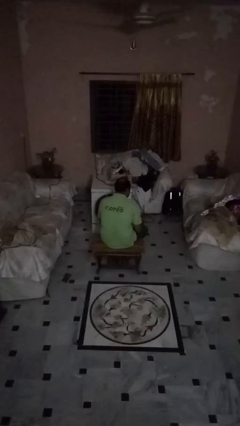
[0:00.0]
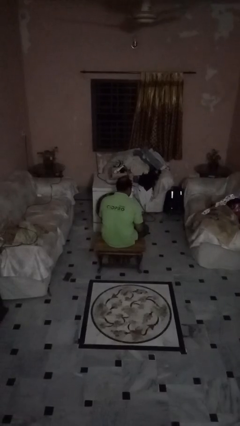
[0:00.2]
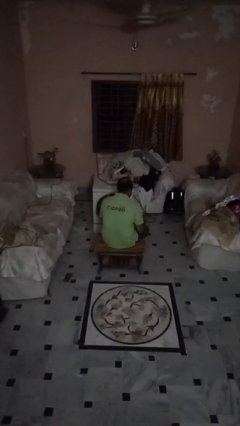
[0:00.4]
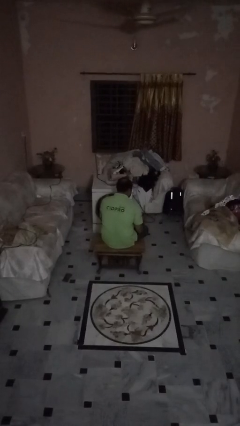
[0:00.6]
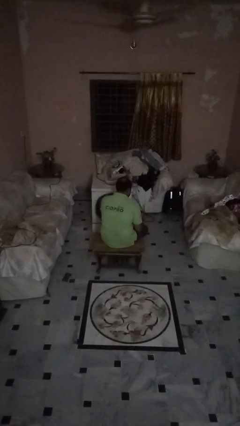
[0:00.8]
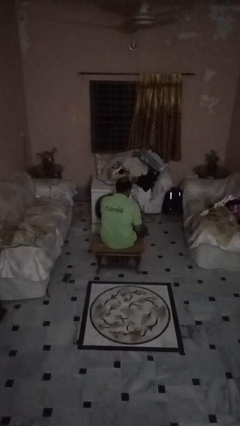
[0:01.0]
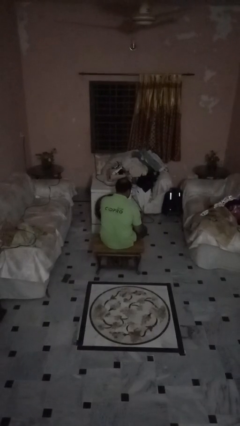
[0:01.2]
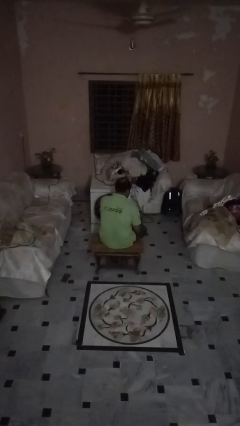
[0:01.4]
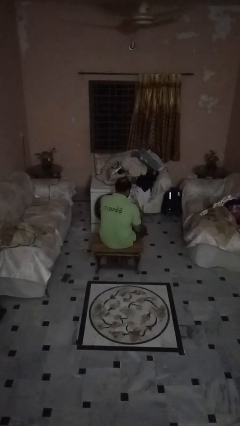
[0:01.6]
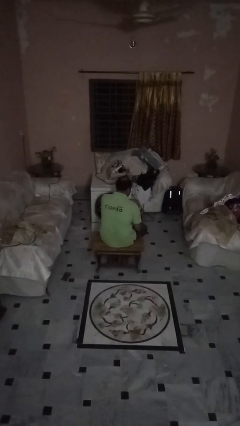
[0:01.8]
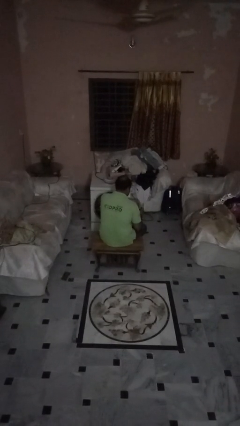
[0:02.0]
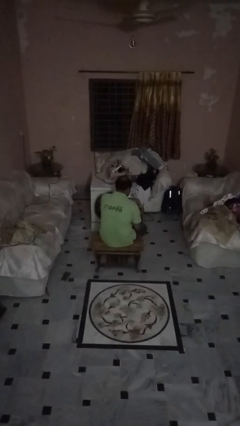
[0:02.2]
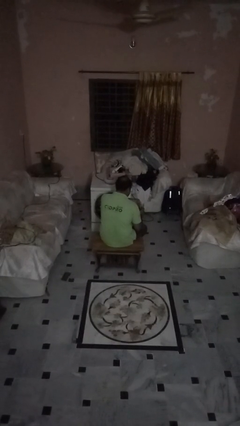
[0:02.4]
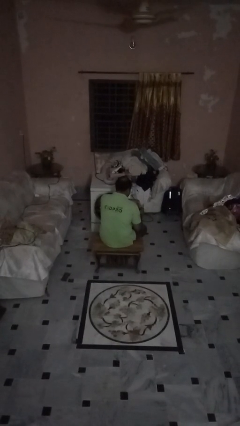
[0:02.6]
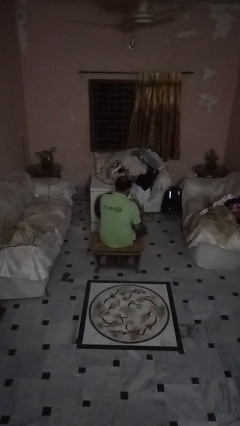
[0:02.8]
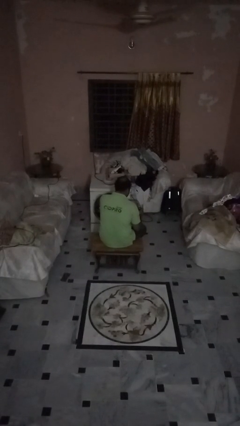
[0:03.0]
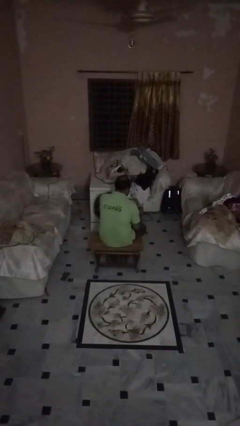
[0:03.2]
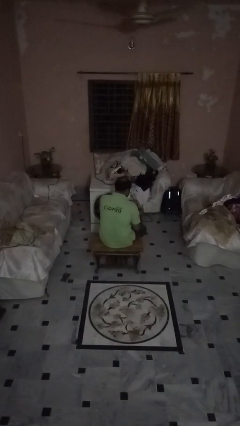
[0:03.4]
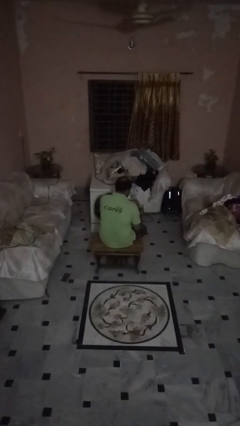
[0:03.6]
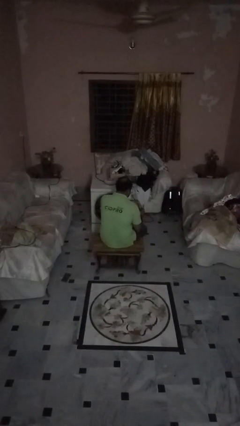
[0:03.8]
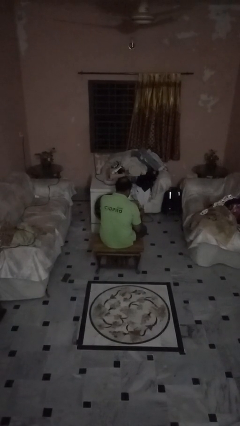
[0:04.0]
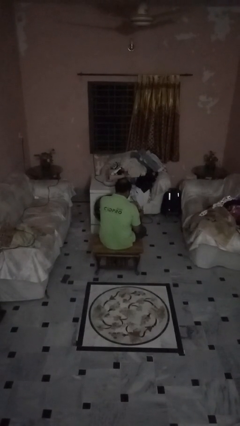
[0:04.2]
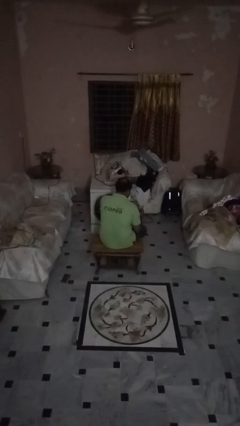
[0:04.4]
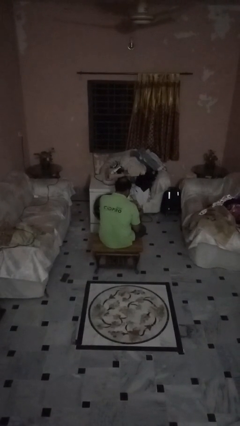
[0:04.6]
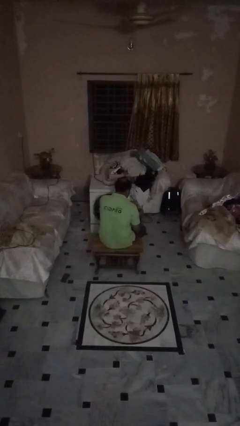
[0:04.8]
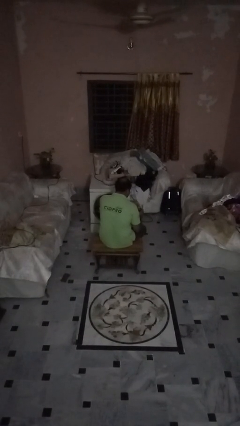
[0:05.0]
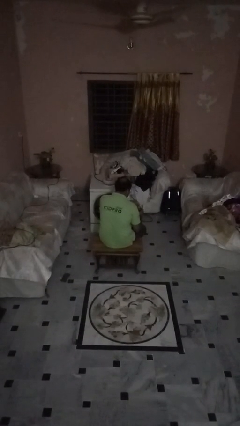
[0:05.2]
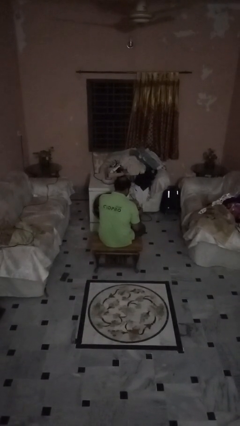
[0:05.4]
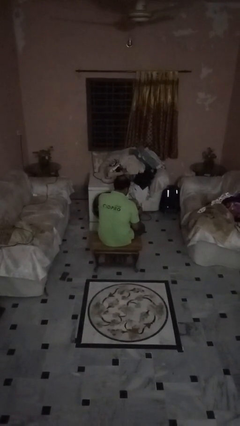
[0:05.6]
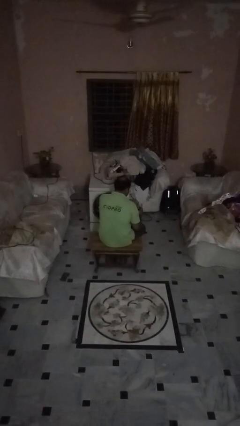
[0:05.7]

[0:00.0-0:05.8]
person opens beverage can

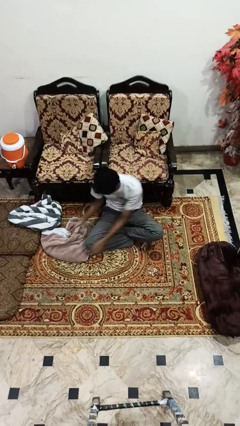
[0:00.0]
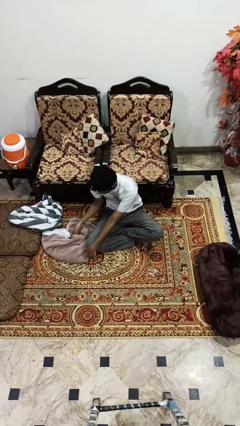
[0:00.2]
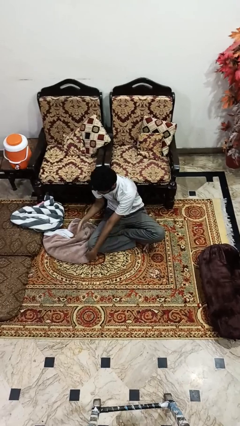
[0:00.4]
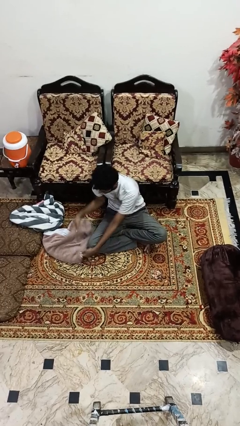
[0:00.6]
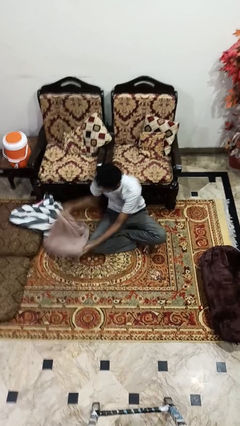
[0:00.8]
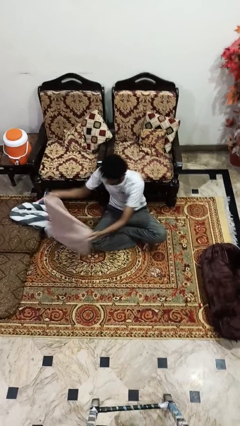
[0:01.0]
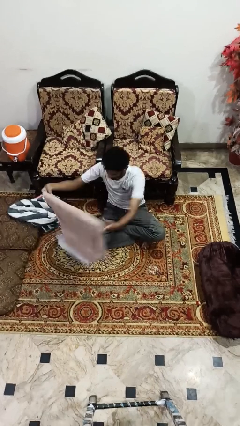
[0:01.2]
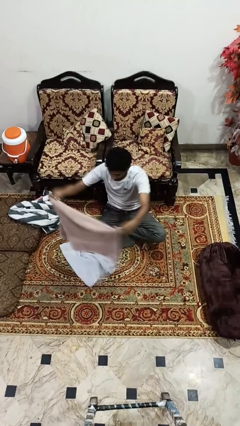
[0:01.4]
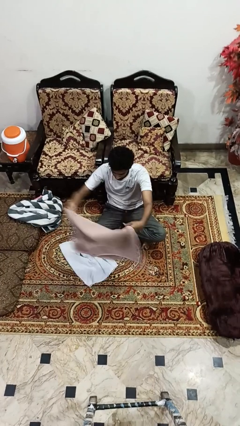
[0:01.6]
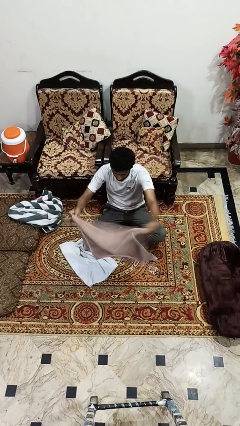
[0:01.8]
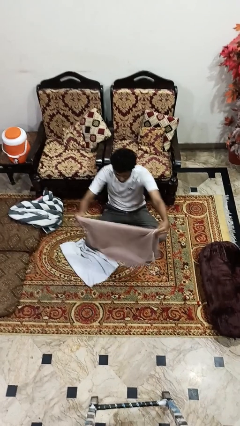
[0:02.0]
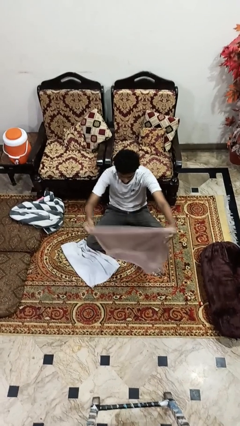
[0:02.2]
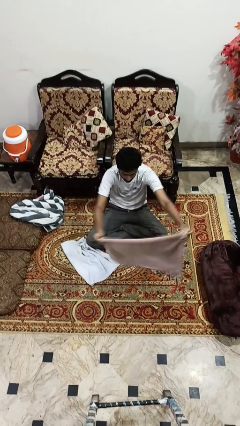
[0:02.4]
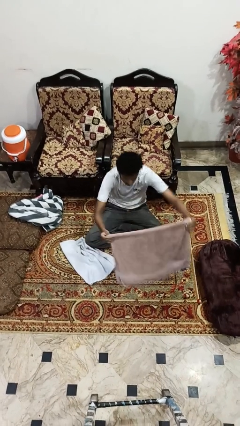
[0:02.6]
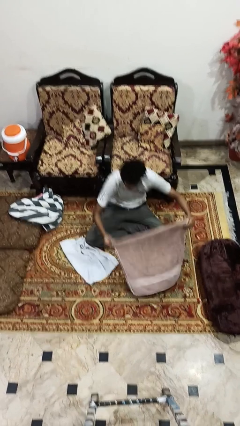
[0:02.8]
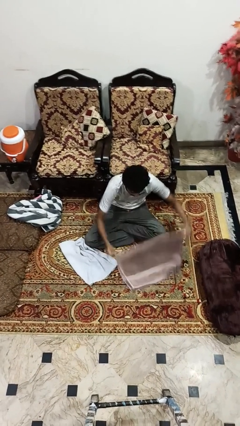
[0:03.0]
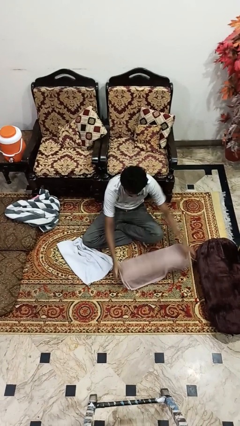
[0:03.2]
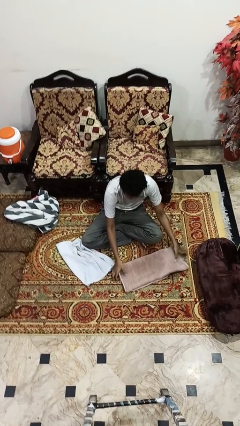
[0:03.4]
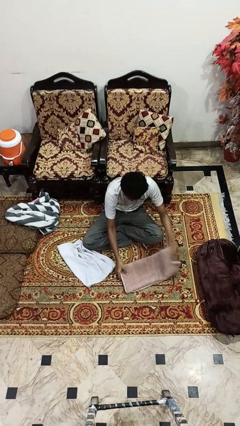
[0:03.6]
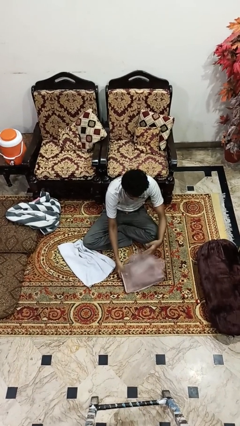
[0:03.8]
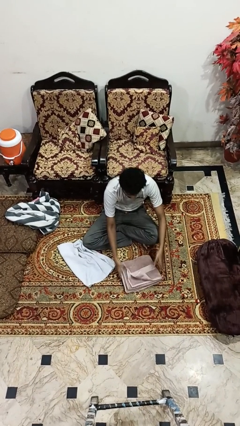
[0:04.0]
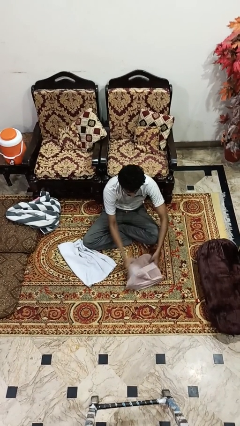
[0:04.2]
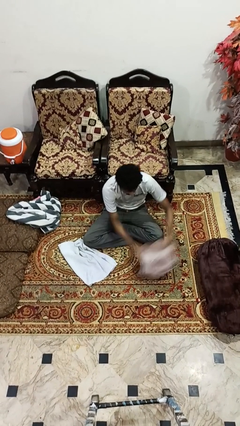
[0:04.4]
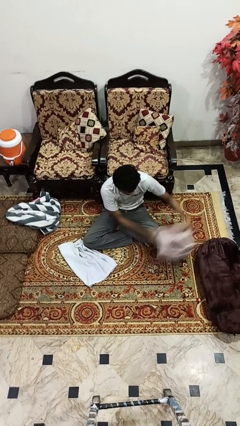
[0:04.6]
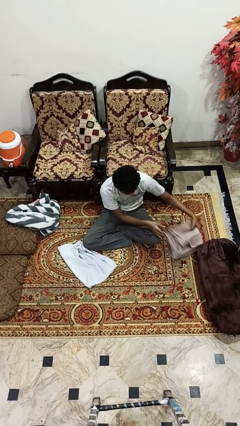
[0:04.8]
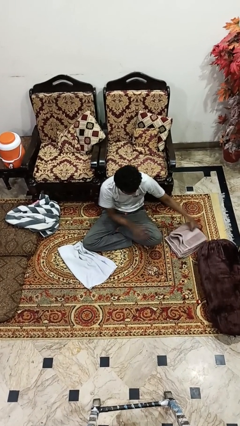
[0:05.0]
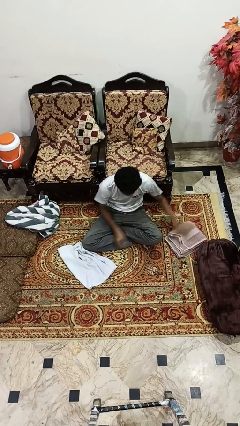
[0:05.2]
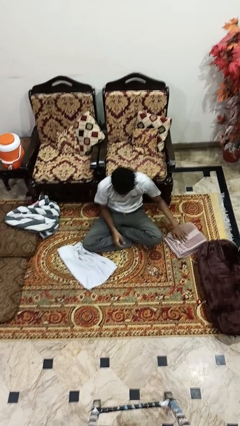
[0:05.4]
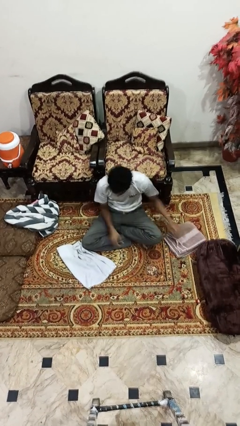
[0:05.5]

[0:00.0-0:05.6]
person folds towel

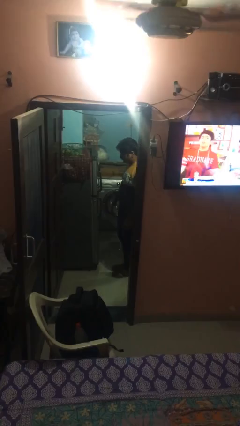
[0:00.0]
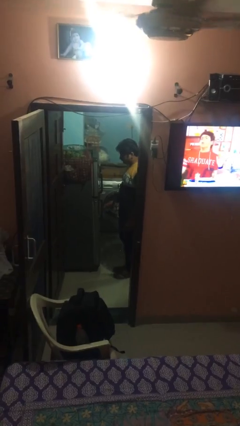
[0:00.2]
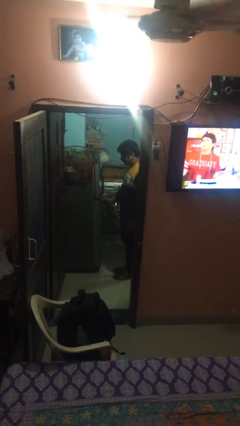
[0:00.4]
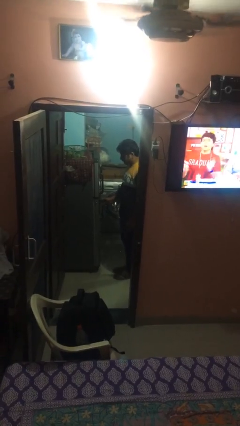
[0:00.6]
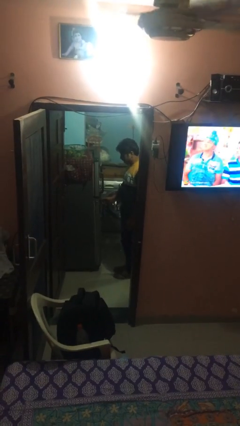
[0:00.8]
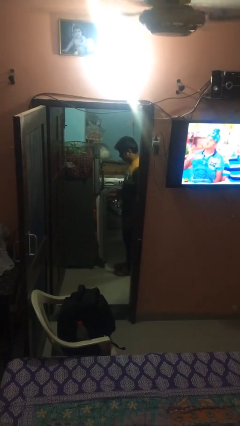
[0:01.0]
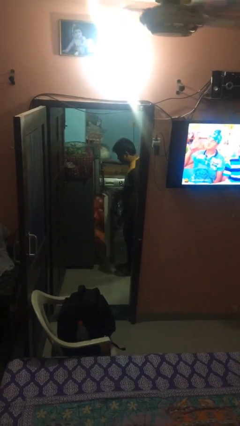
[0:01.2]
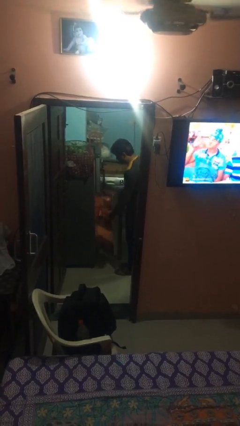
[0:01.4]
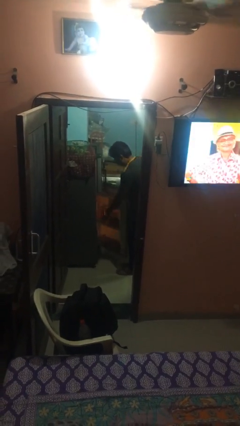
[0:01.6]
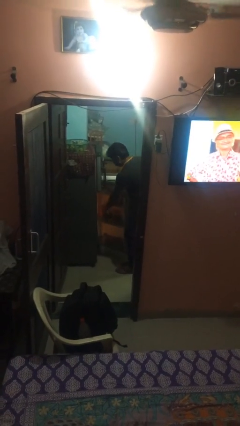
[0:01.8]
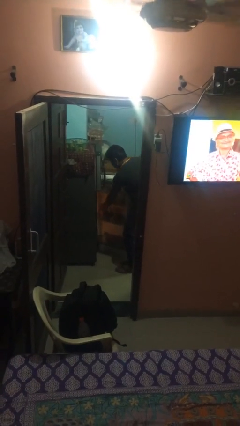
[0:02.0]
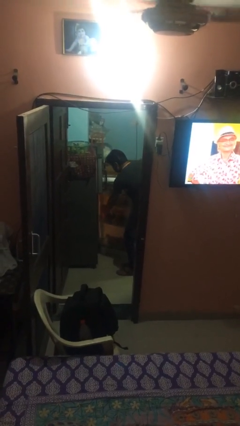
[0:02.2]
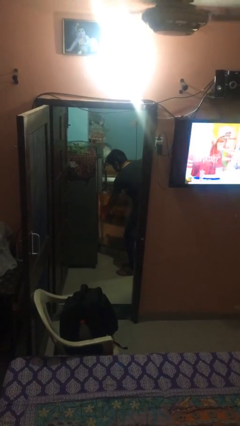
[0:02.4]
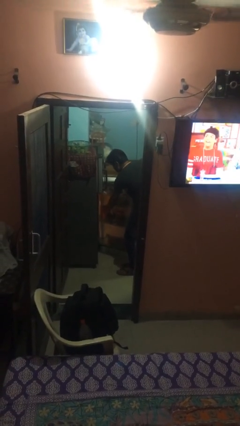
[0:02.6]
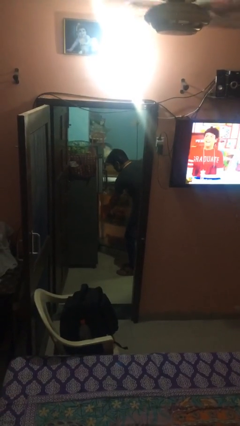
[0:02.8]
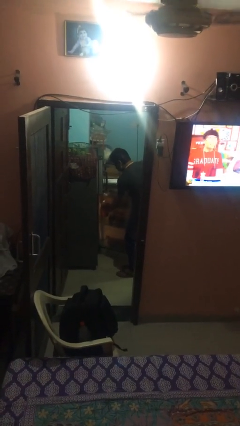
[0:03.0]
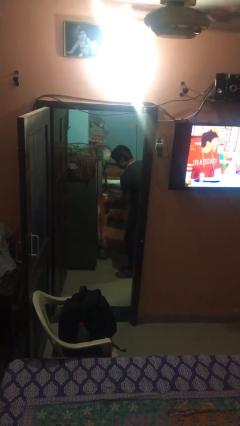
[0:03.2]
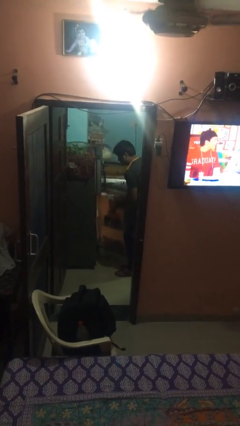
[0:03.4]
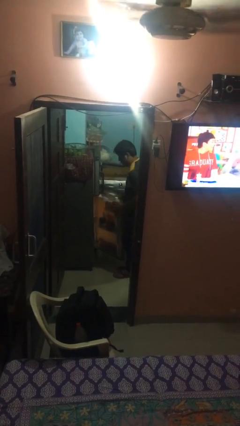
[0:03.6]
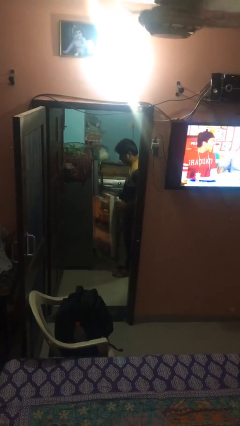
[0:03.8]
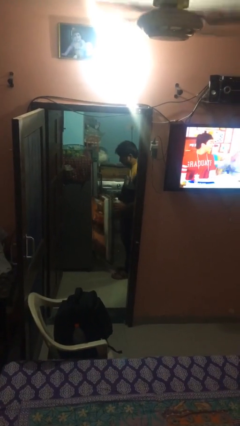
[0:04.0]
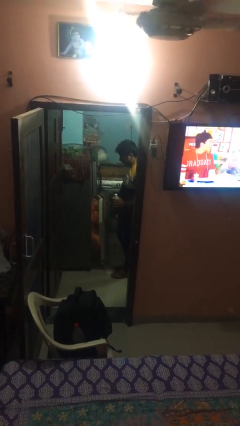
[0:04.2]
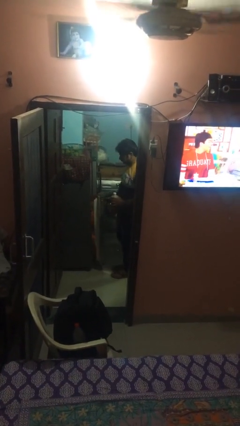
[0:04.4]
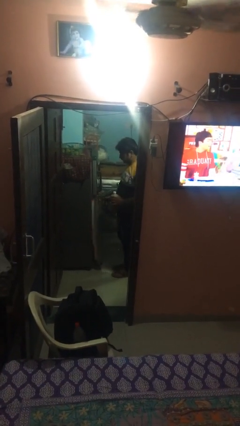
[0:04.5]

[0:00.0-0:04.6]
person takes object from refrigerator

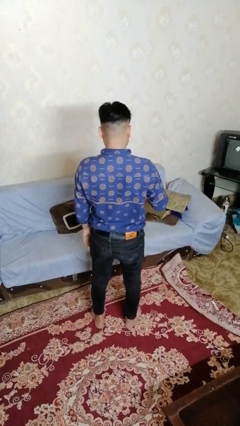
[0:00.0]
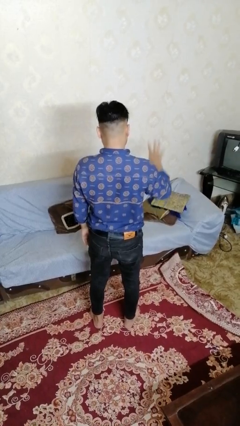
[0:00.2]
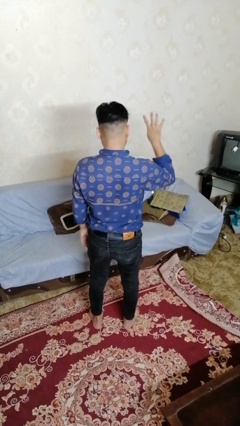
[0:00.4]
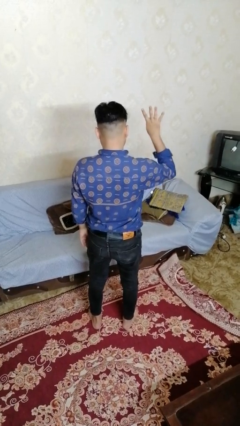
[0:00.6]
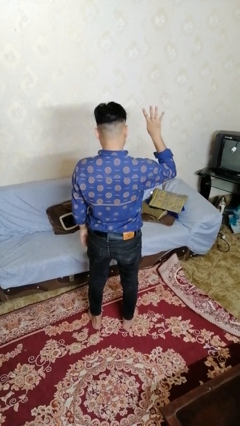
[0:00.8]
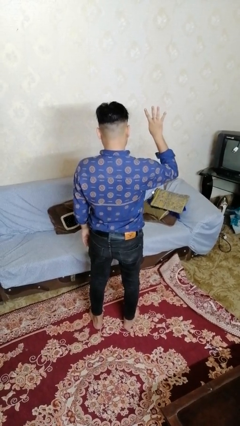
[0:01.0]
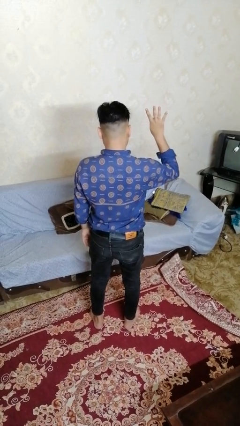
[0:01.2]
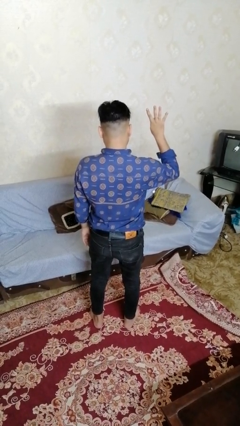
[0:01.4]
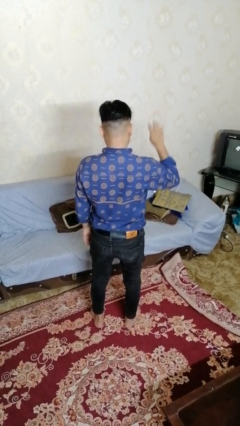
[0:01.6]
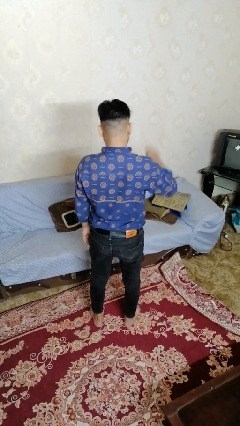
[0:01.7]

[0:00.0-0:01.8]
person gestures number four

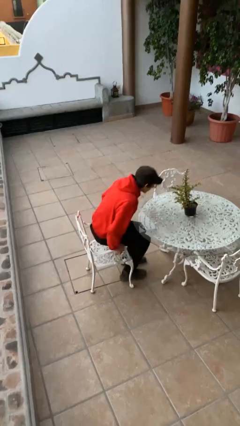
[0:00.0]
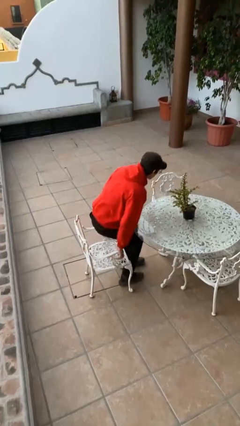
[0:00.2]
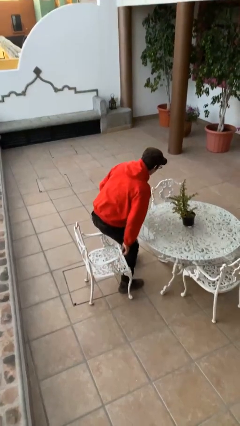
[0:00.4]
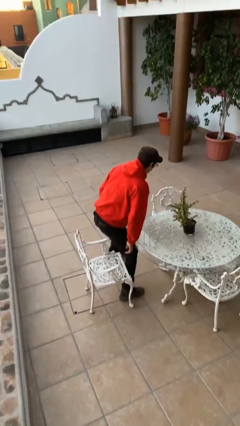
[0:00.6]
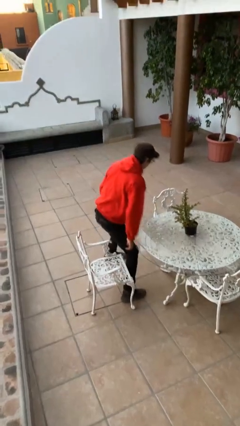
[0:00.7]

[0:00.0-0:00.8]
person stands up
